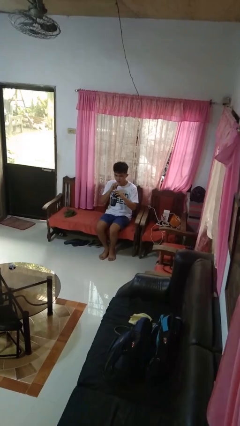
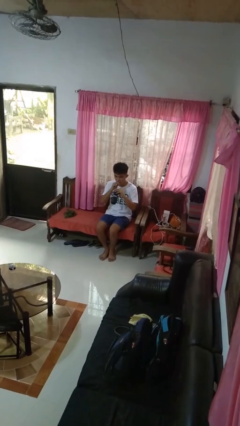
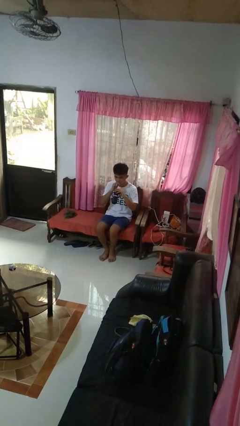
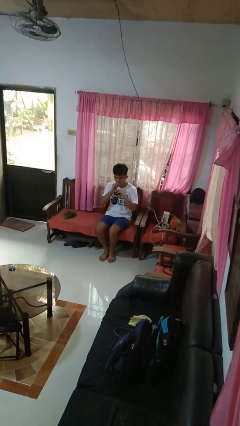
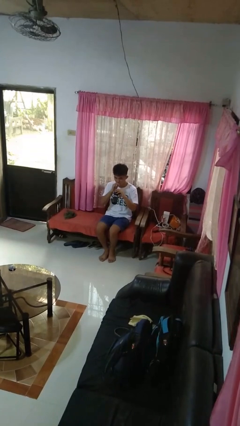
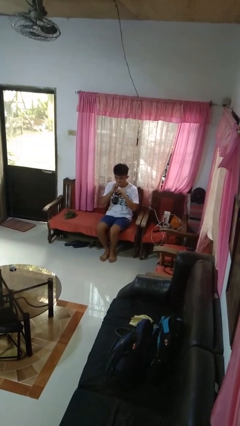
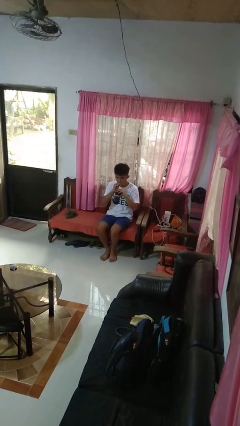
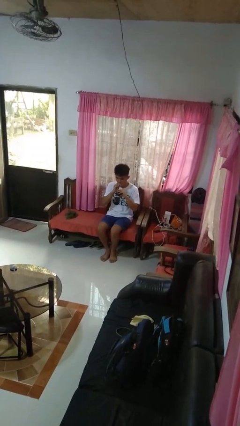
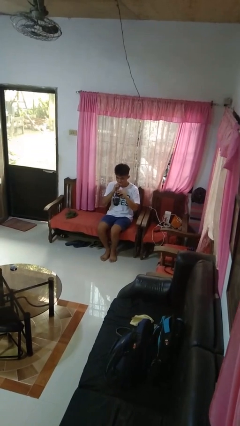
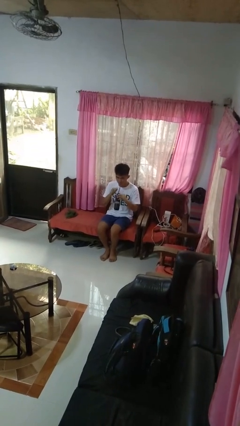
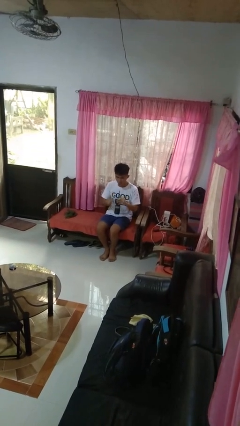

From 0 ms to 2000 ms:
person drinks from straw

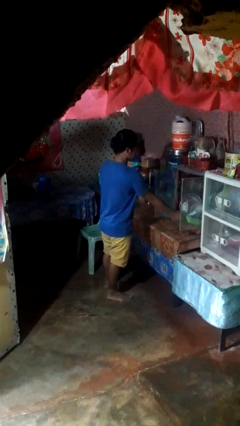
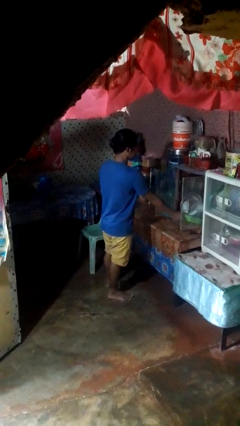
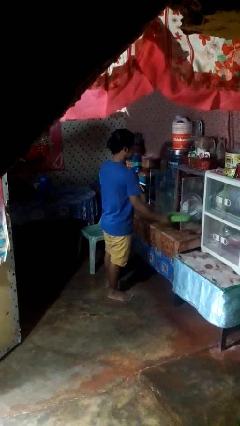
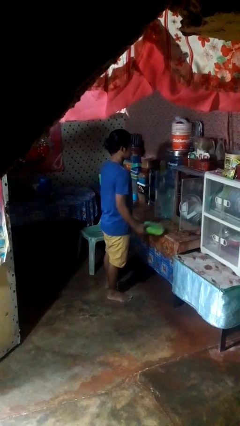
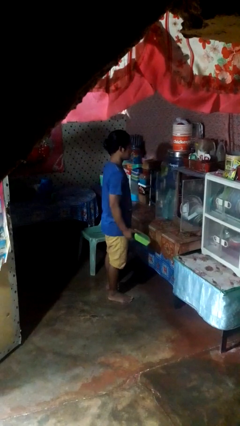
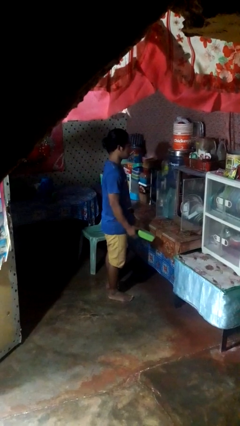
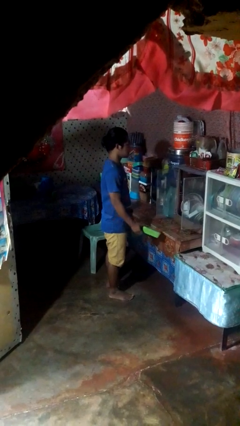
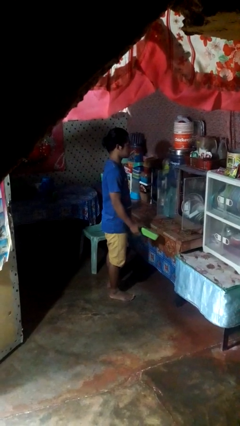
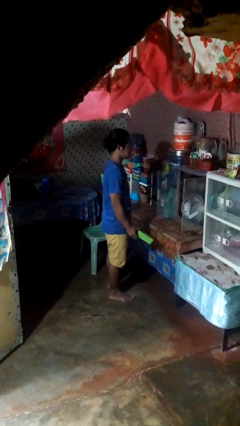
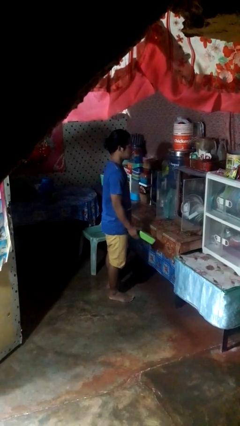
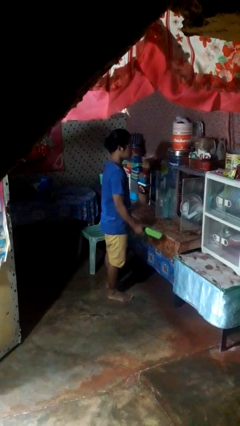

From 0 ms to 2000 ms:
person picks up object from cabinet

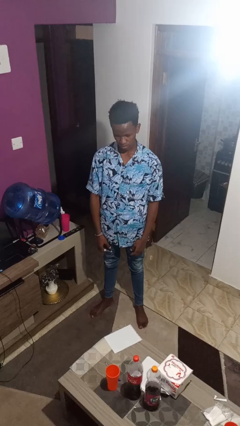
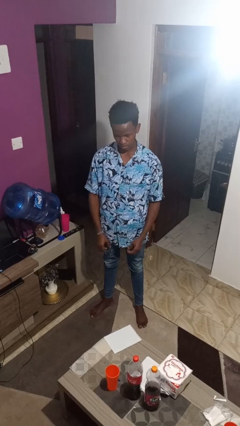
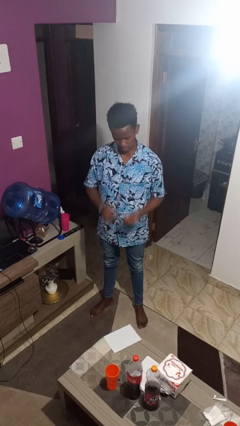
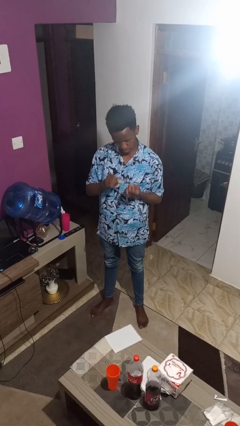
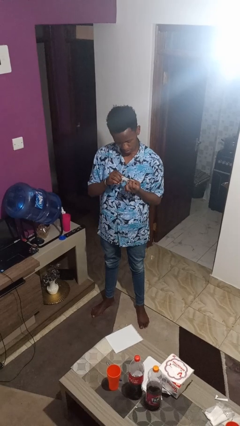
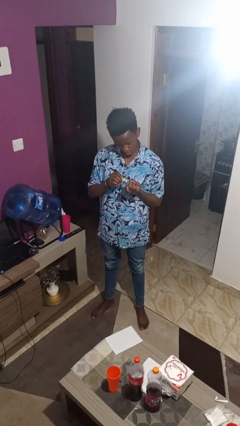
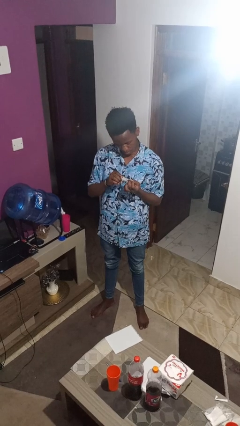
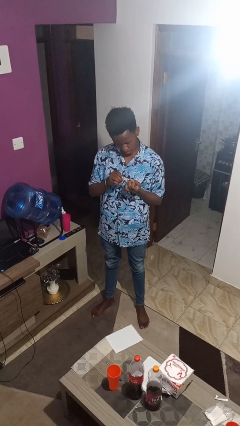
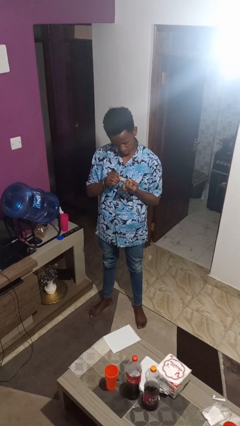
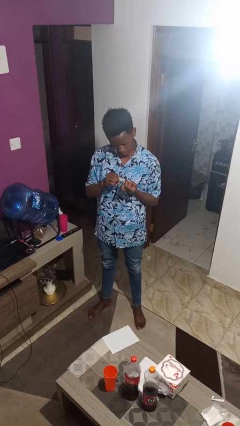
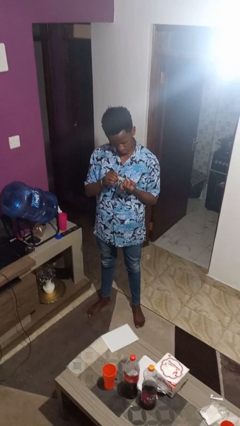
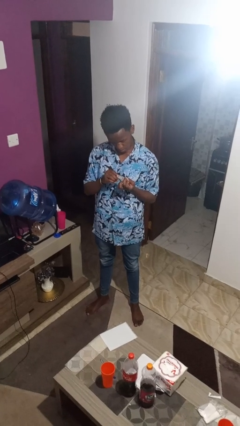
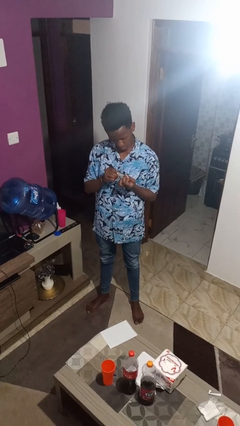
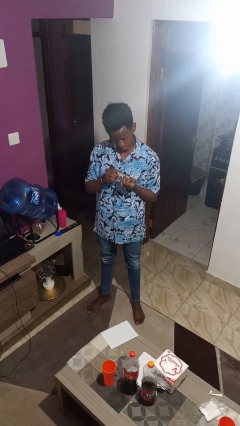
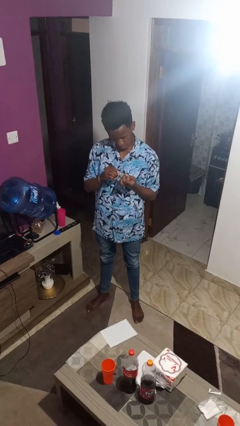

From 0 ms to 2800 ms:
person clips fingernails

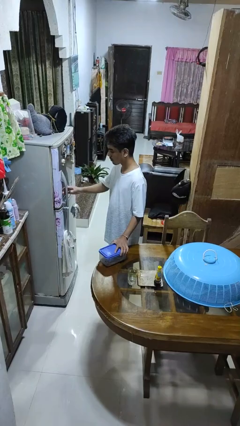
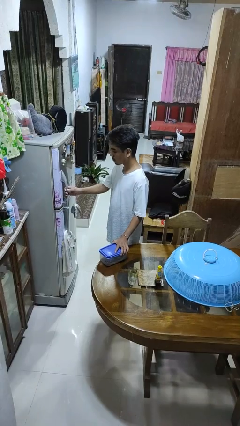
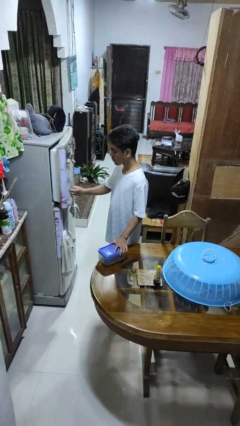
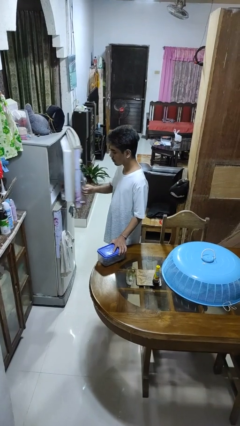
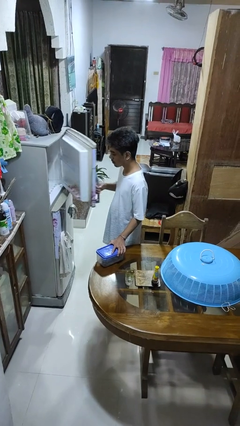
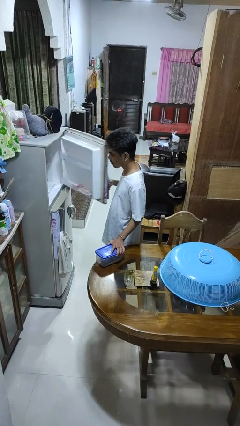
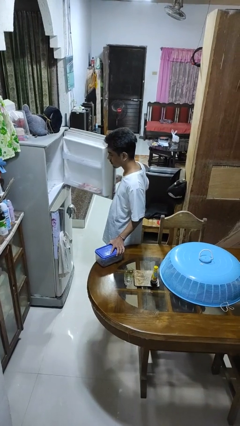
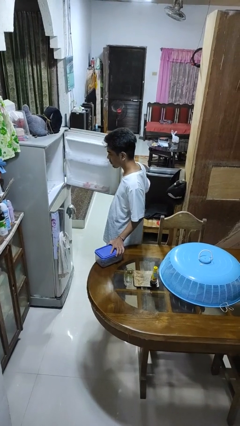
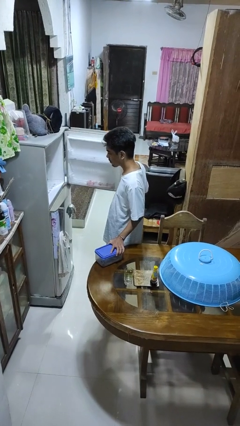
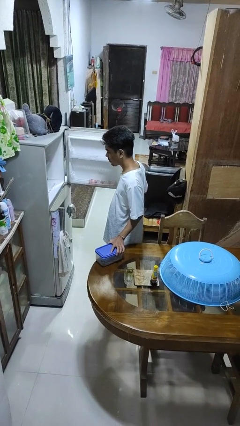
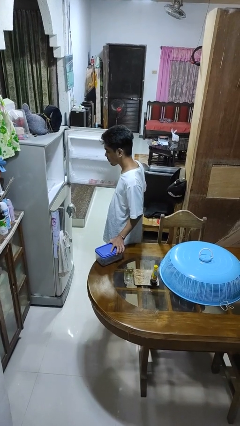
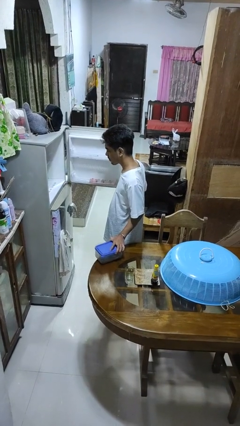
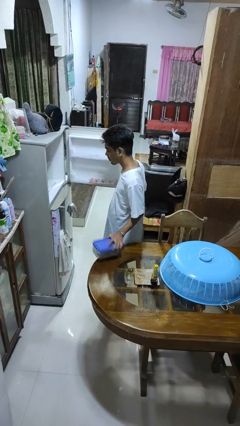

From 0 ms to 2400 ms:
person opens refrigerator

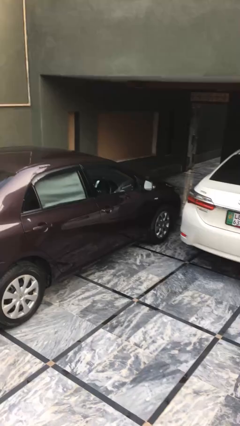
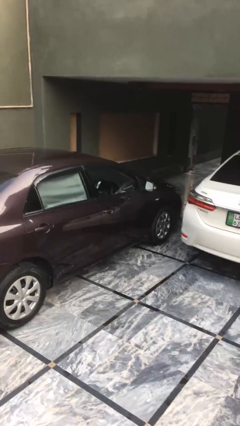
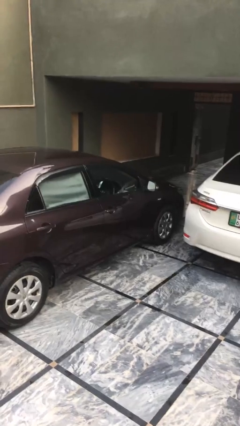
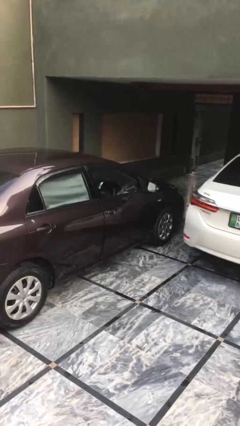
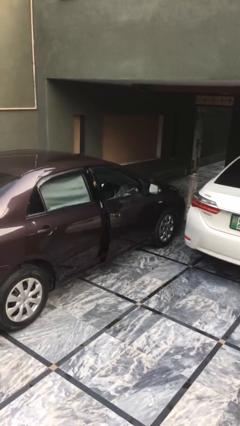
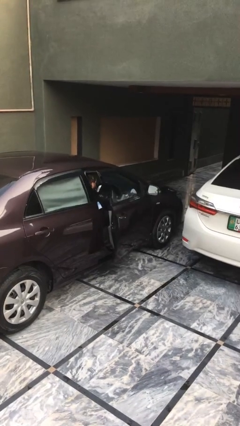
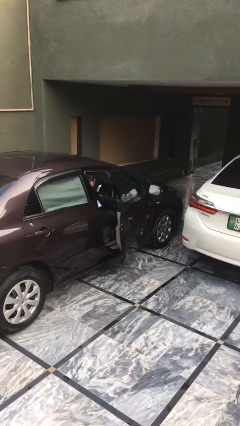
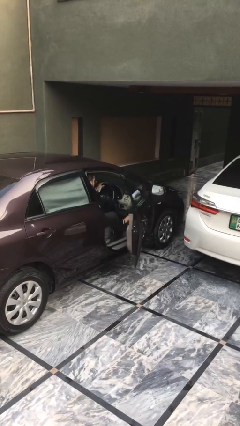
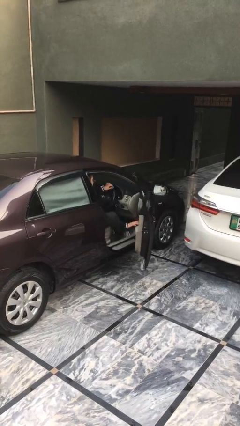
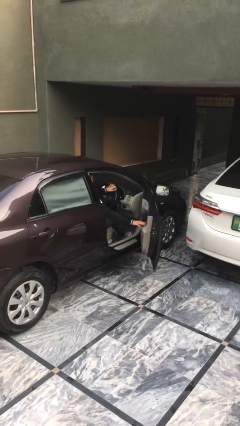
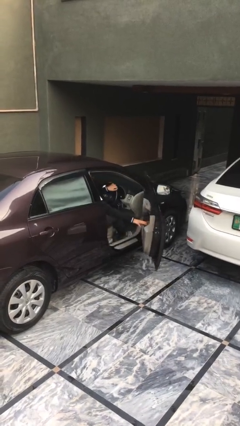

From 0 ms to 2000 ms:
person opens car door

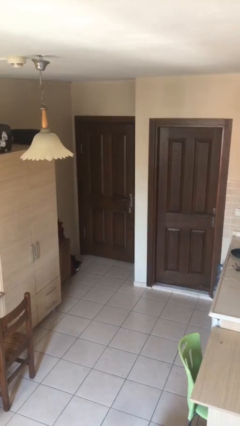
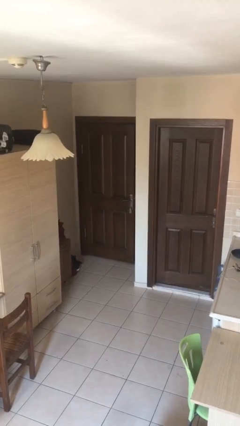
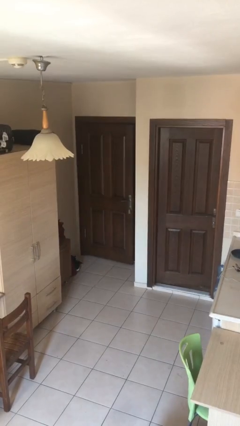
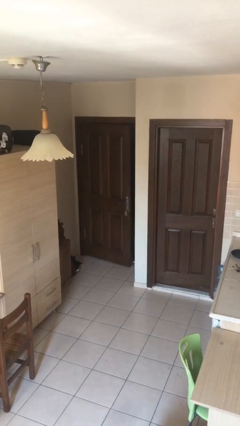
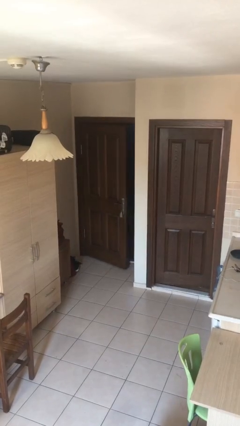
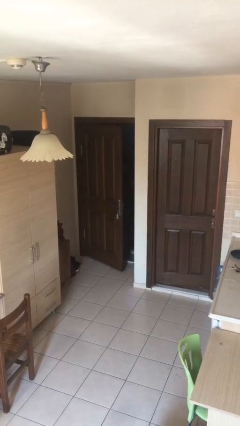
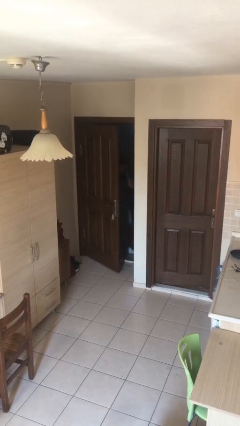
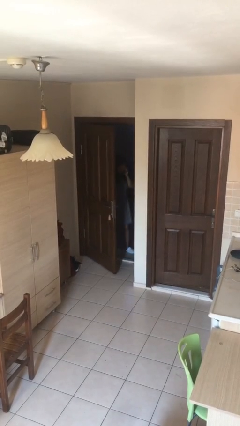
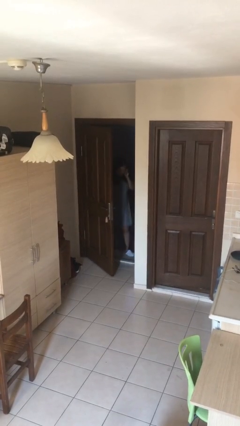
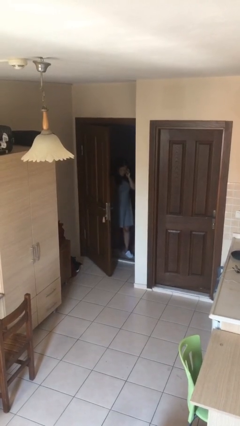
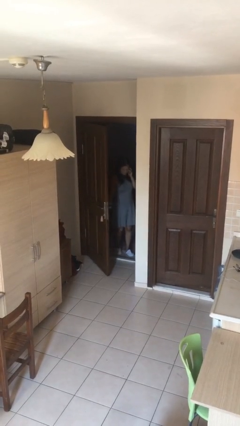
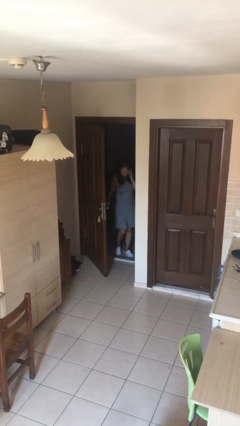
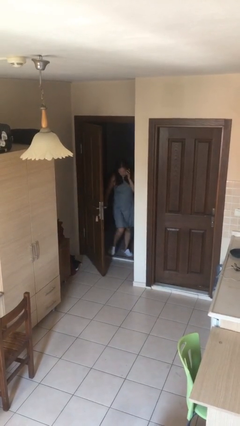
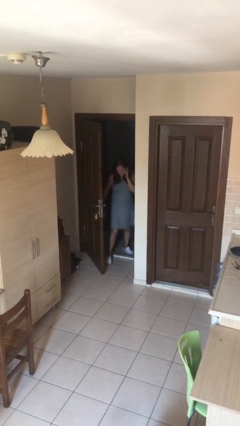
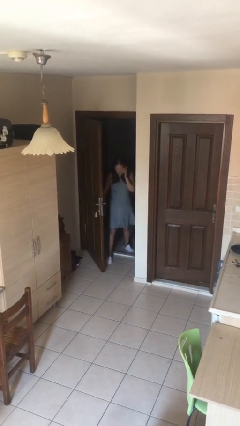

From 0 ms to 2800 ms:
person opens facility door

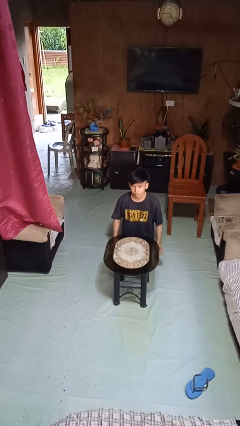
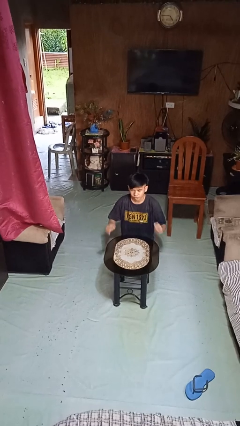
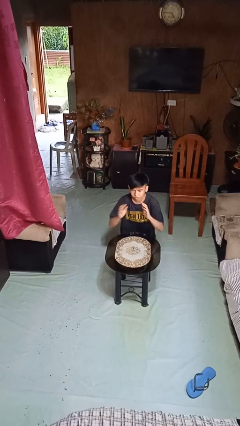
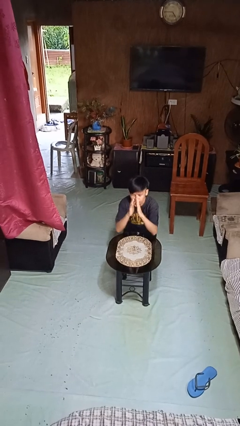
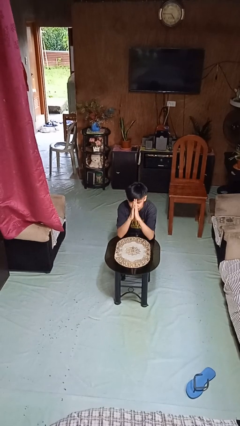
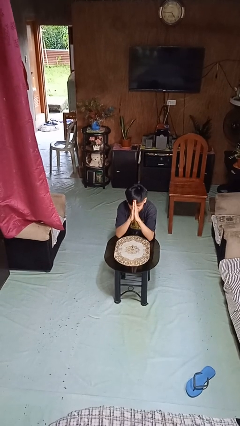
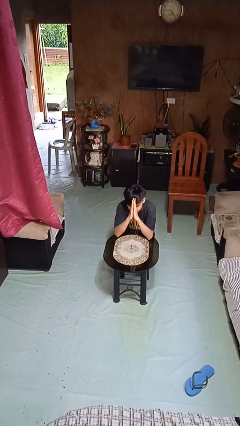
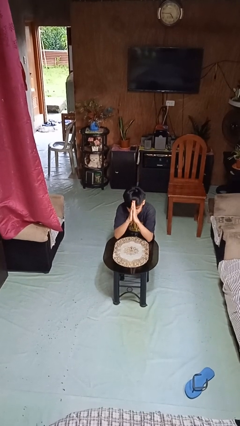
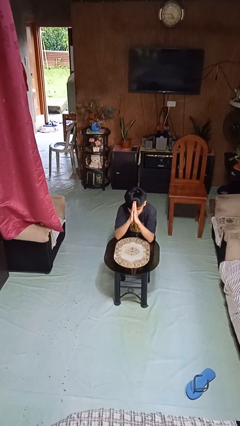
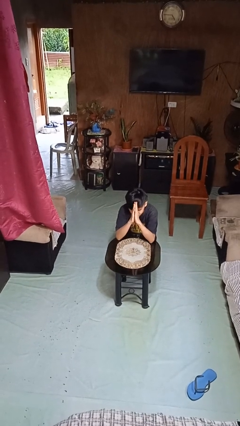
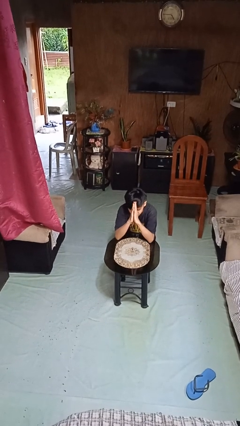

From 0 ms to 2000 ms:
person prays

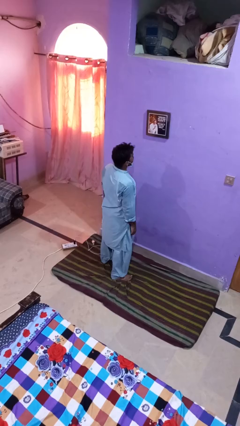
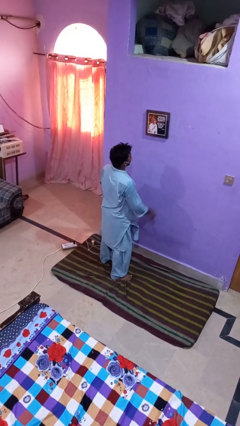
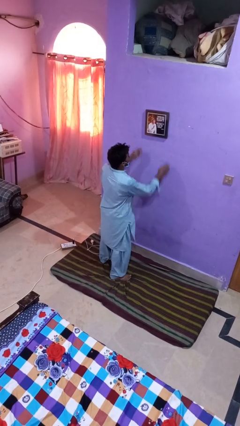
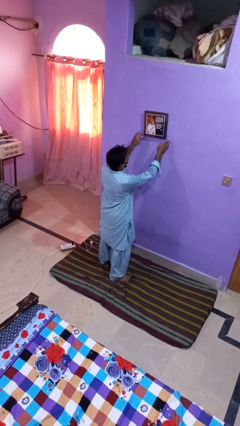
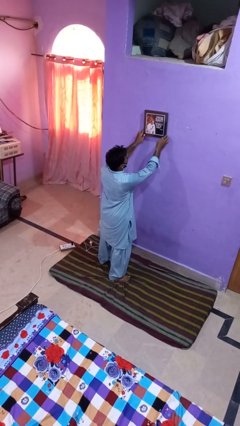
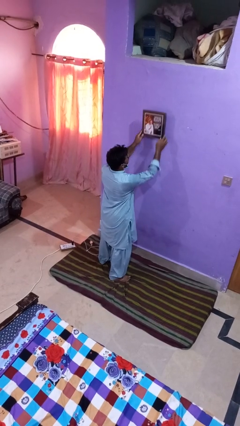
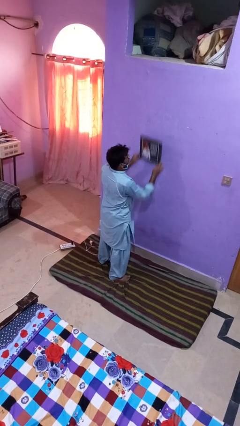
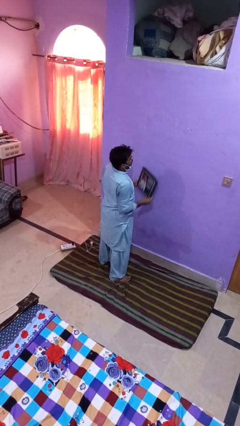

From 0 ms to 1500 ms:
person takes down picture frame
